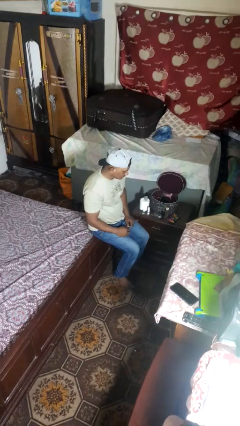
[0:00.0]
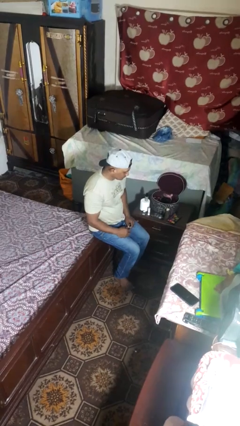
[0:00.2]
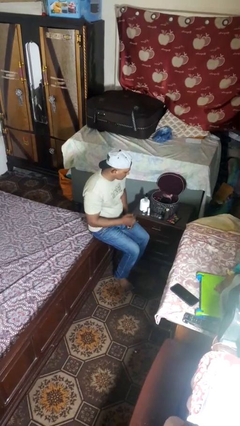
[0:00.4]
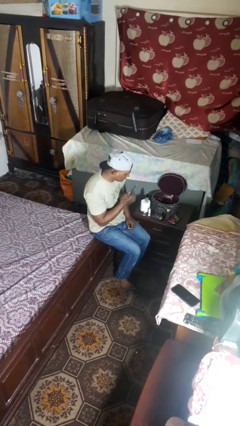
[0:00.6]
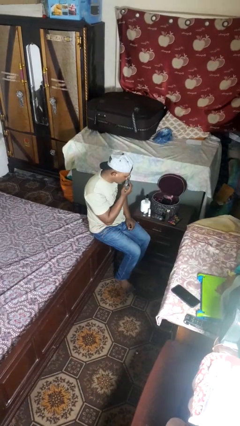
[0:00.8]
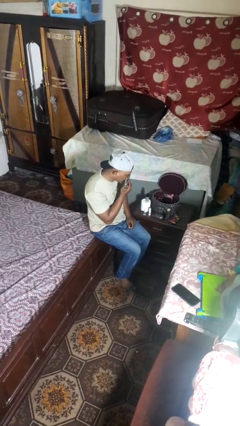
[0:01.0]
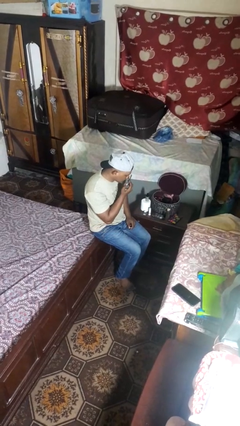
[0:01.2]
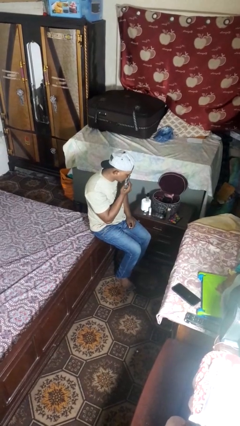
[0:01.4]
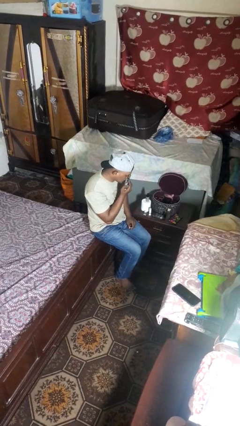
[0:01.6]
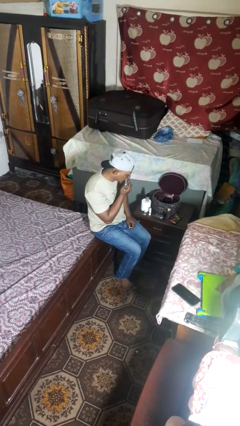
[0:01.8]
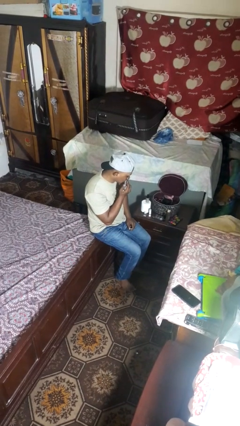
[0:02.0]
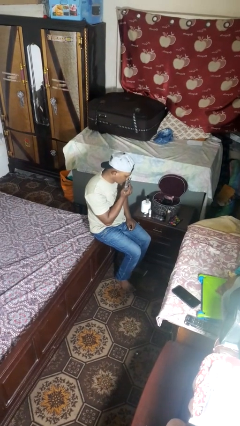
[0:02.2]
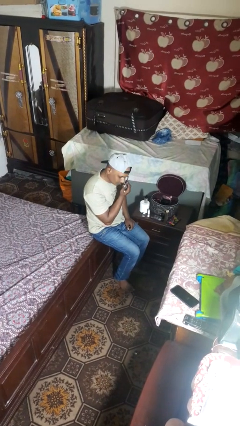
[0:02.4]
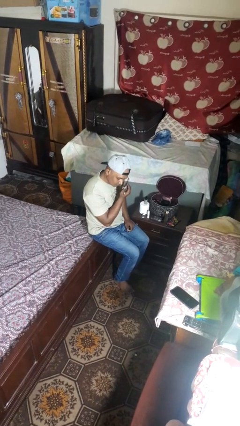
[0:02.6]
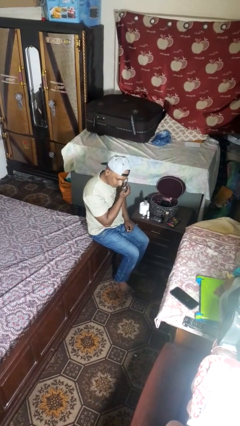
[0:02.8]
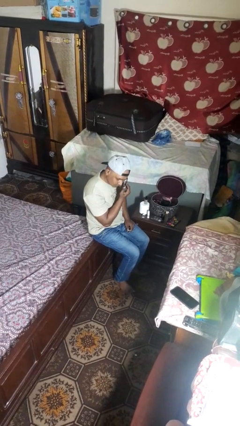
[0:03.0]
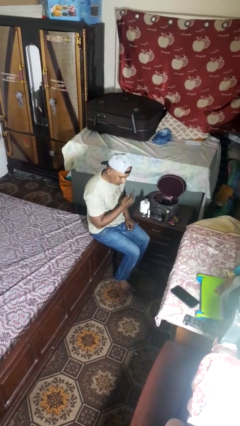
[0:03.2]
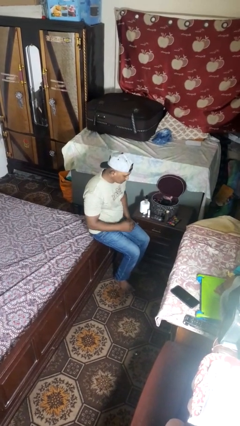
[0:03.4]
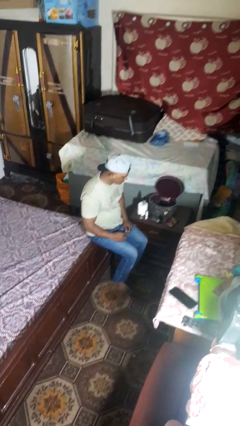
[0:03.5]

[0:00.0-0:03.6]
person applies eye makeup

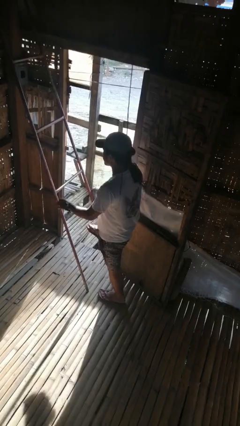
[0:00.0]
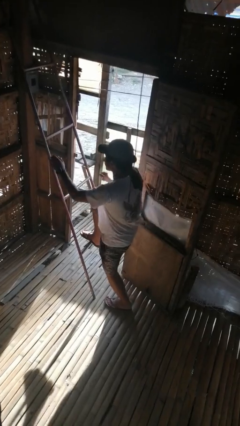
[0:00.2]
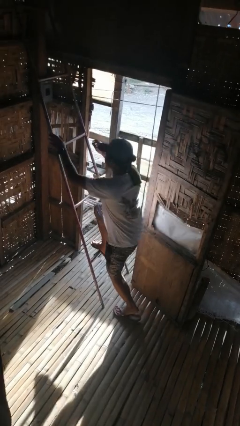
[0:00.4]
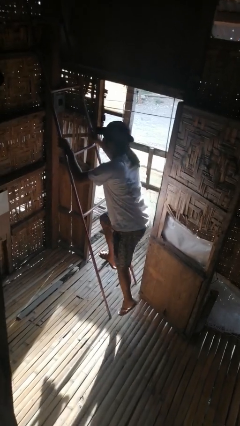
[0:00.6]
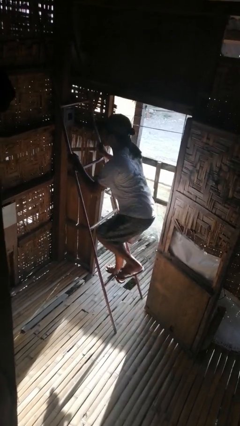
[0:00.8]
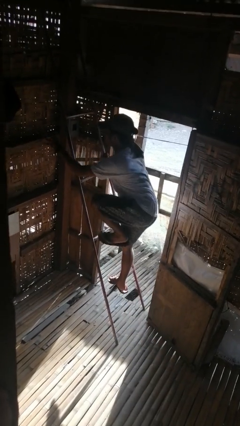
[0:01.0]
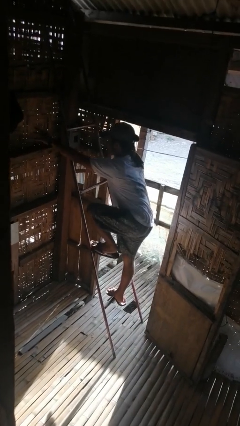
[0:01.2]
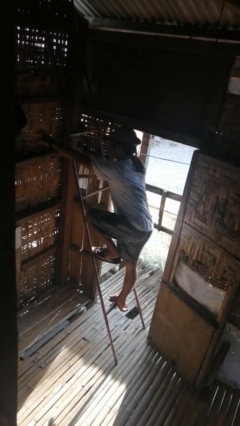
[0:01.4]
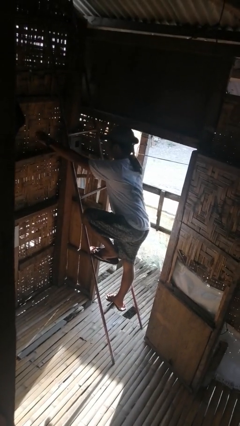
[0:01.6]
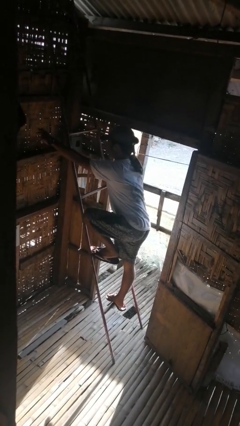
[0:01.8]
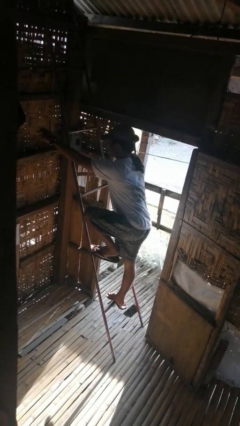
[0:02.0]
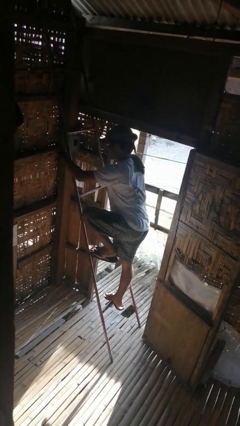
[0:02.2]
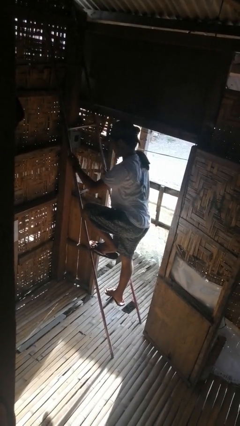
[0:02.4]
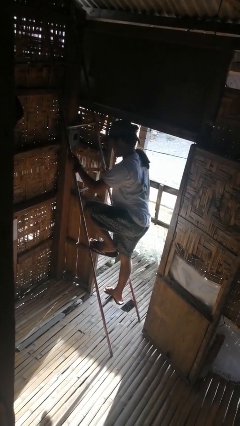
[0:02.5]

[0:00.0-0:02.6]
person climbs up ladder

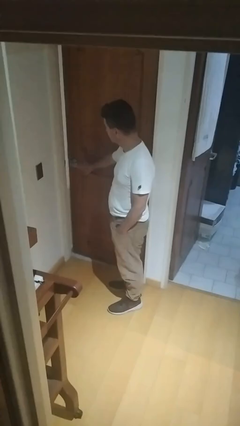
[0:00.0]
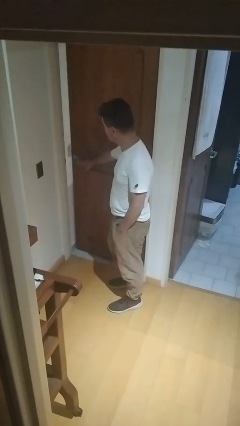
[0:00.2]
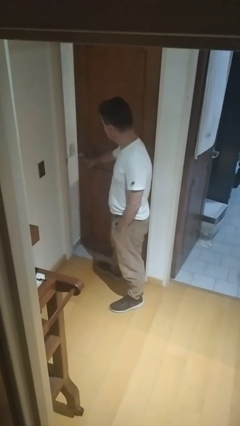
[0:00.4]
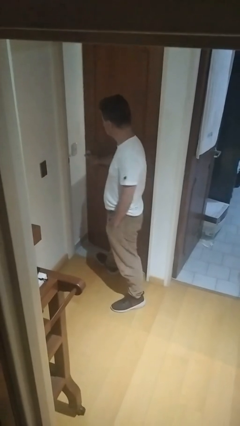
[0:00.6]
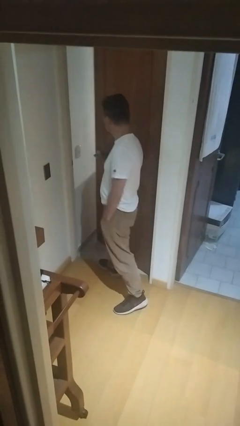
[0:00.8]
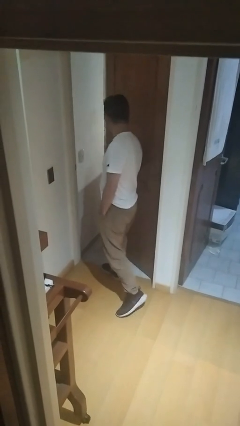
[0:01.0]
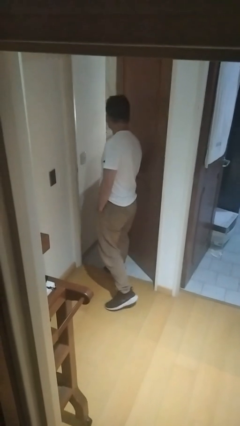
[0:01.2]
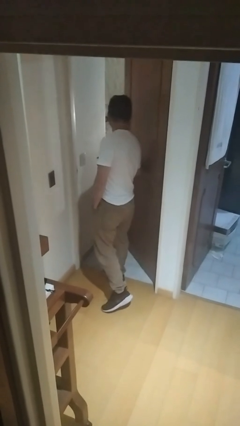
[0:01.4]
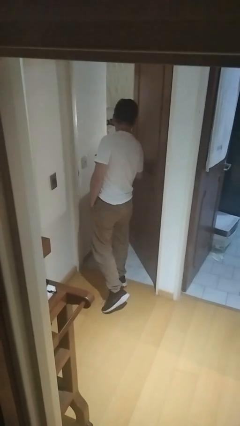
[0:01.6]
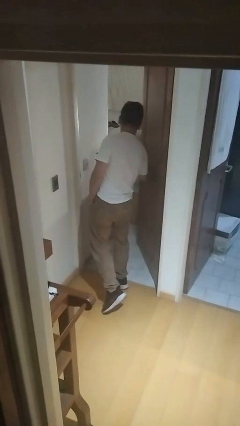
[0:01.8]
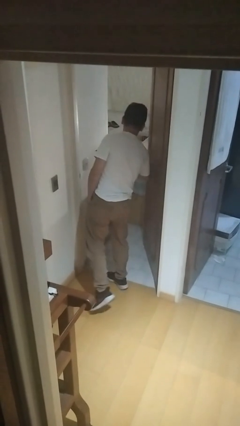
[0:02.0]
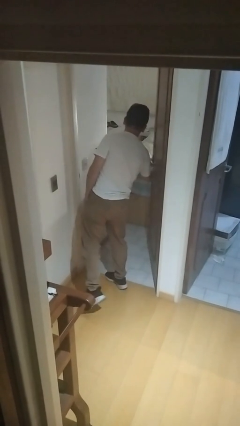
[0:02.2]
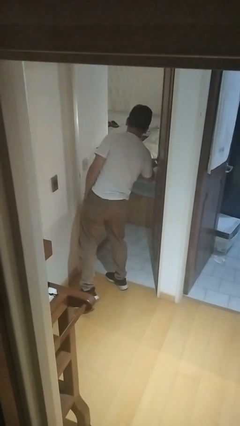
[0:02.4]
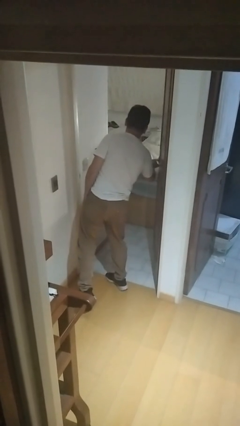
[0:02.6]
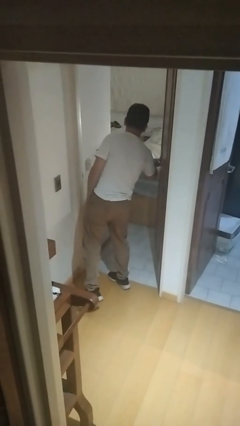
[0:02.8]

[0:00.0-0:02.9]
person opens facility door

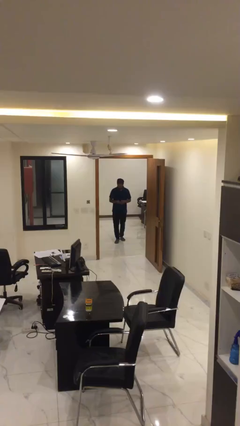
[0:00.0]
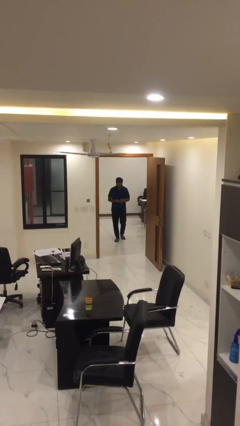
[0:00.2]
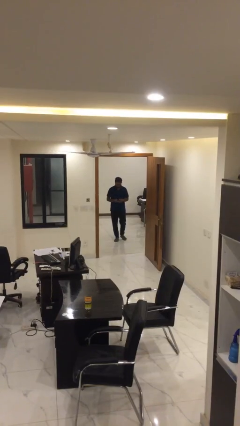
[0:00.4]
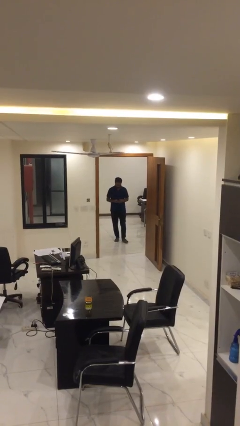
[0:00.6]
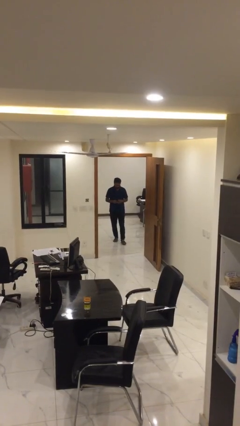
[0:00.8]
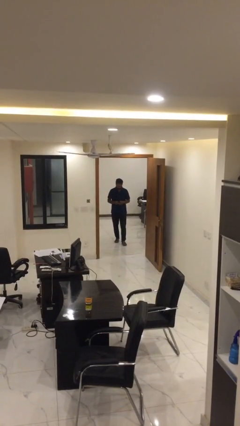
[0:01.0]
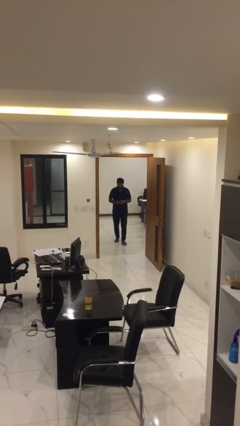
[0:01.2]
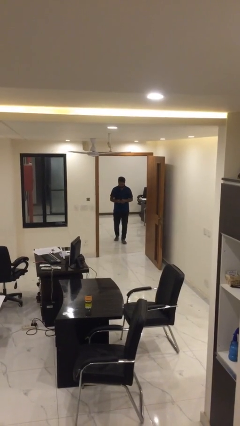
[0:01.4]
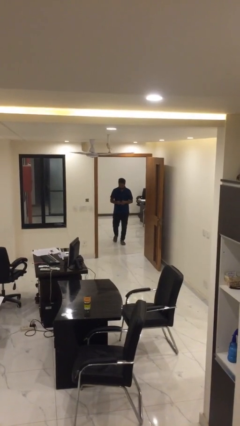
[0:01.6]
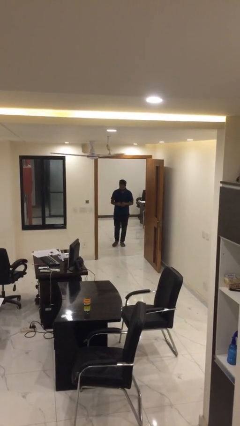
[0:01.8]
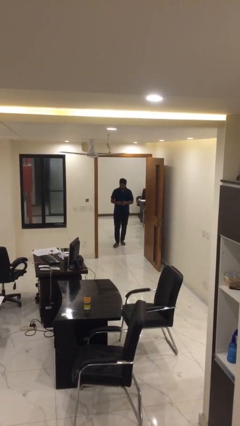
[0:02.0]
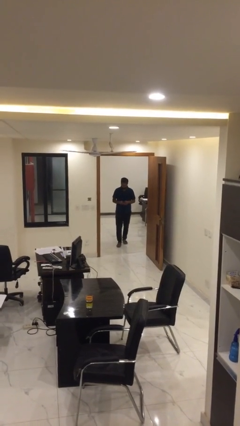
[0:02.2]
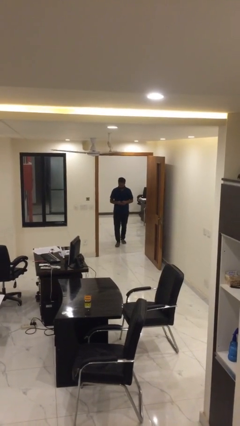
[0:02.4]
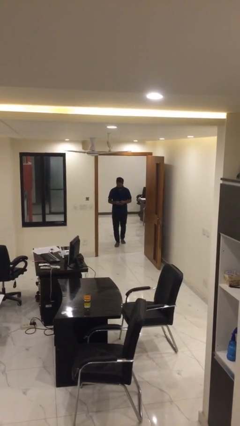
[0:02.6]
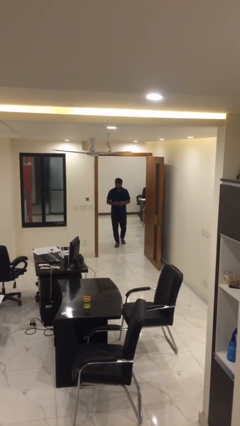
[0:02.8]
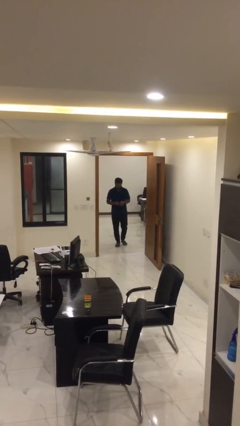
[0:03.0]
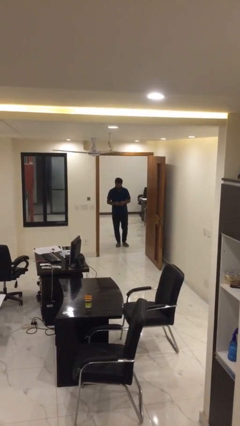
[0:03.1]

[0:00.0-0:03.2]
person texts on phone

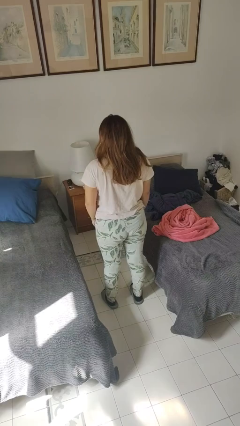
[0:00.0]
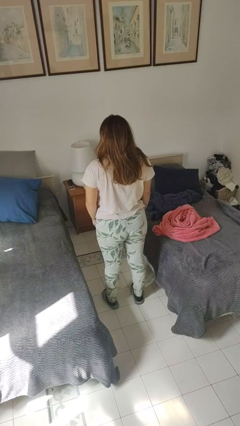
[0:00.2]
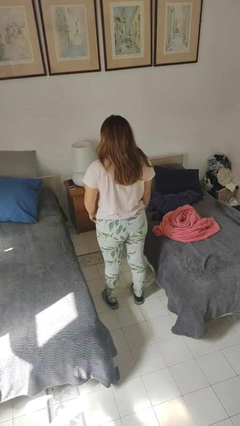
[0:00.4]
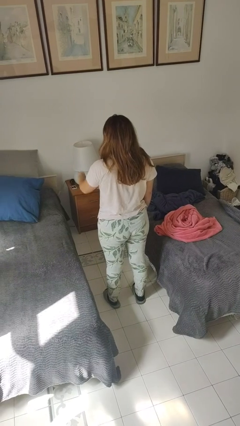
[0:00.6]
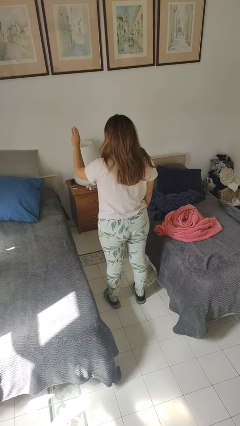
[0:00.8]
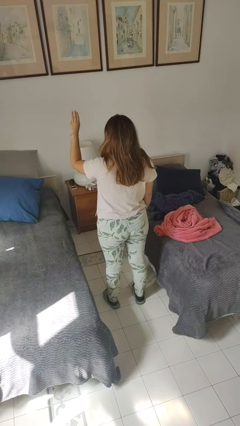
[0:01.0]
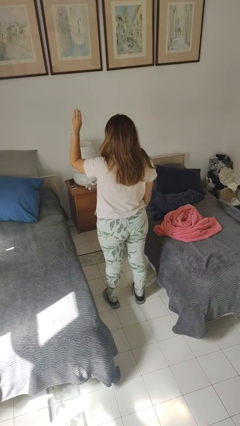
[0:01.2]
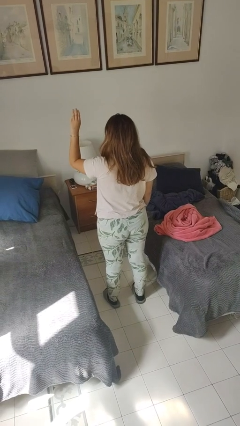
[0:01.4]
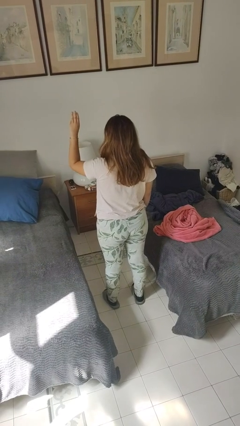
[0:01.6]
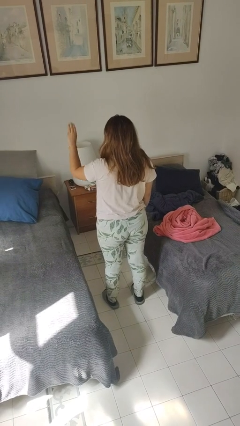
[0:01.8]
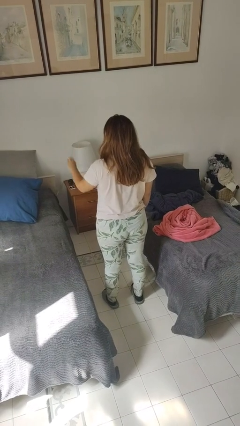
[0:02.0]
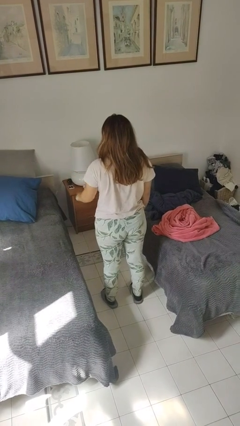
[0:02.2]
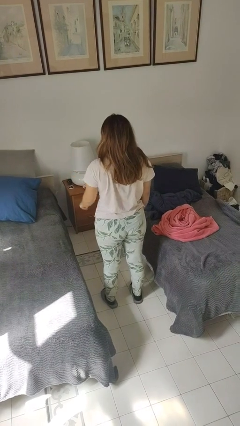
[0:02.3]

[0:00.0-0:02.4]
person gestures number three

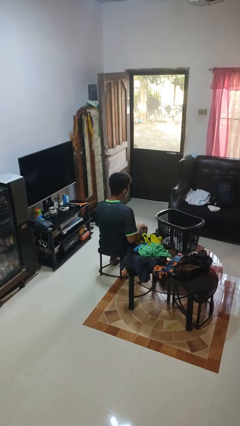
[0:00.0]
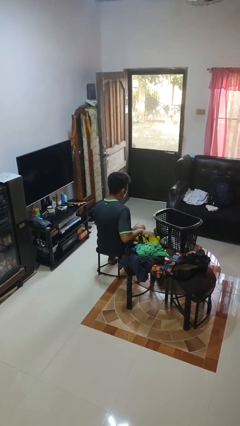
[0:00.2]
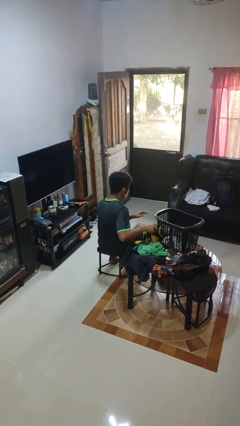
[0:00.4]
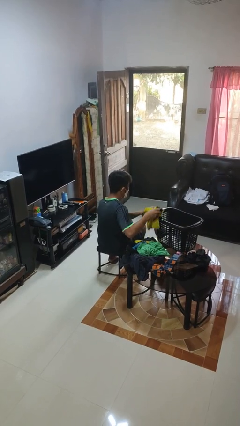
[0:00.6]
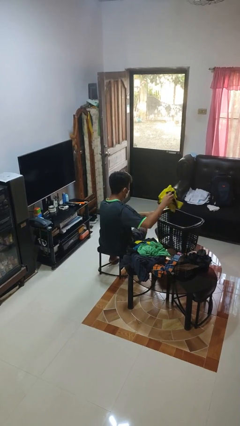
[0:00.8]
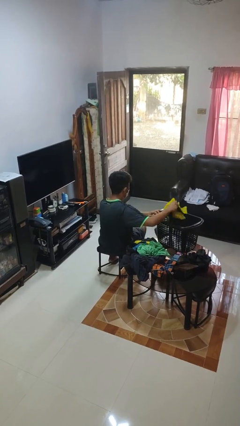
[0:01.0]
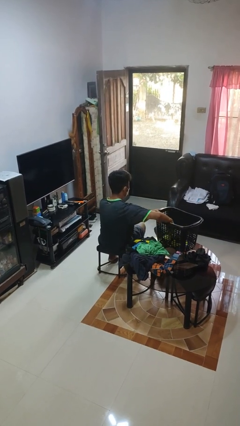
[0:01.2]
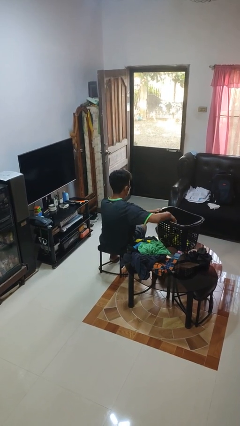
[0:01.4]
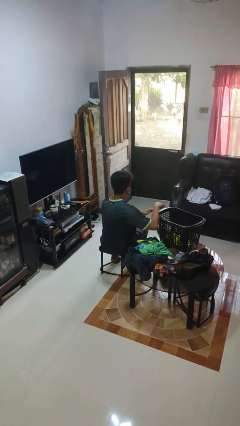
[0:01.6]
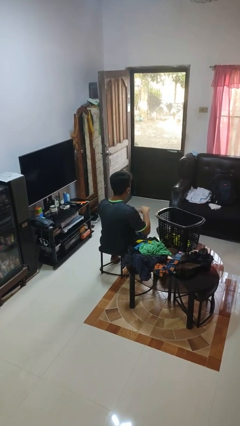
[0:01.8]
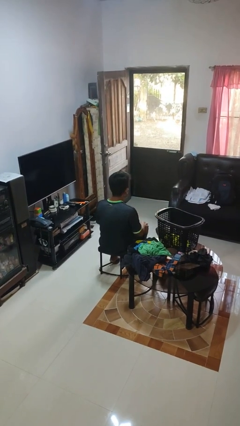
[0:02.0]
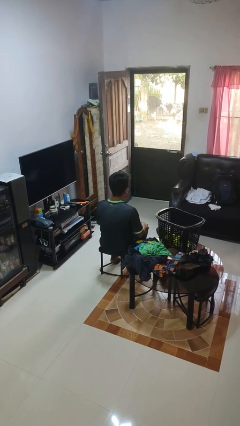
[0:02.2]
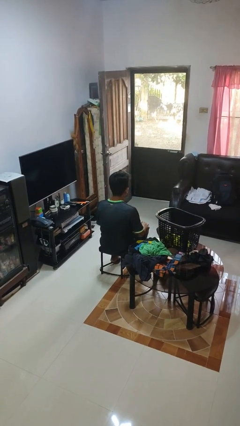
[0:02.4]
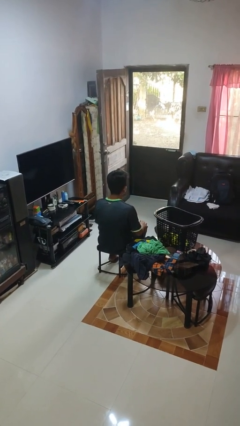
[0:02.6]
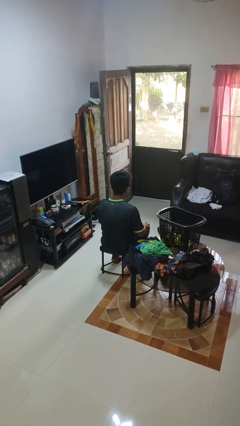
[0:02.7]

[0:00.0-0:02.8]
person puts object into basket
